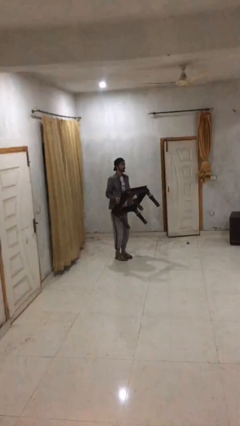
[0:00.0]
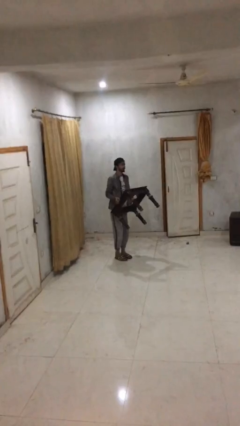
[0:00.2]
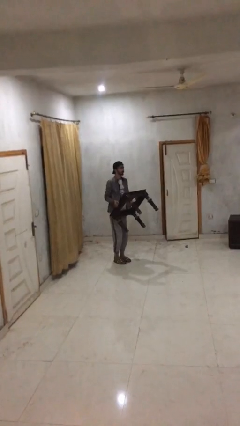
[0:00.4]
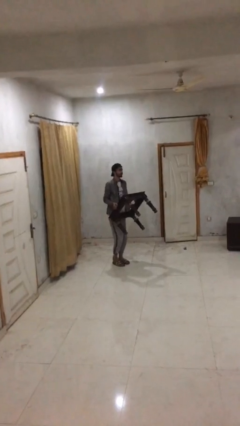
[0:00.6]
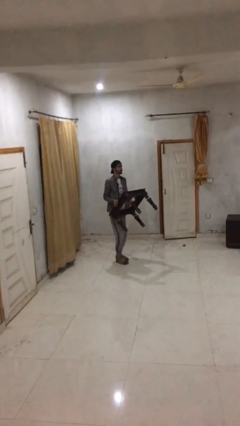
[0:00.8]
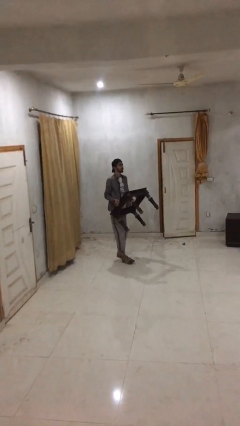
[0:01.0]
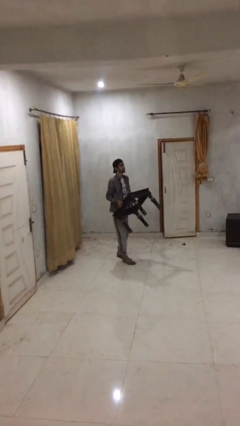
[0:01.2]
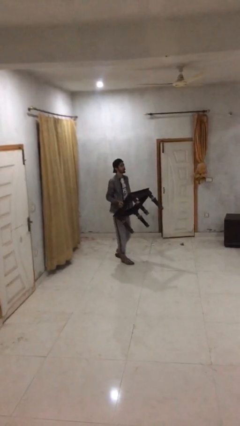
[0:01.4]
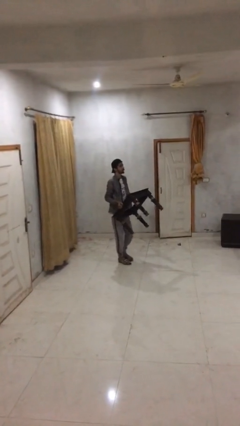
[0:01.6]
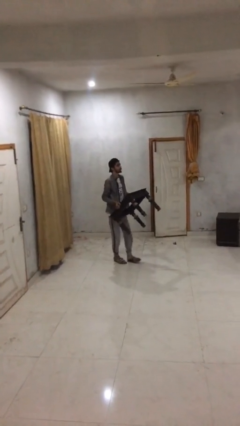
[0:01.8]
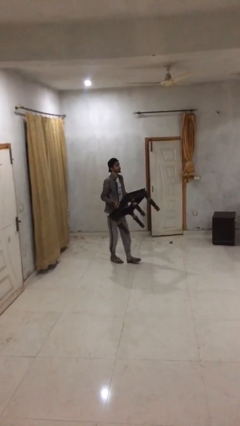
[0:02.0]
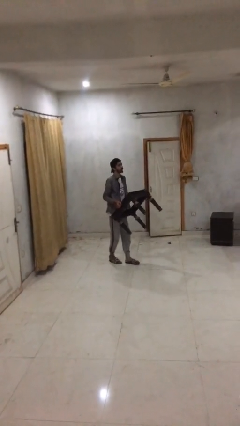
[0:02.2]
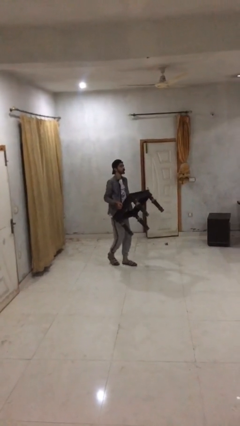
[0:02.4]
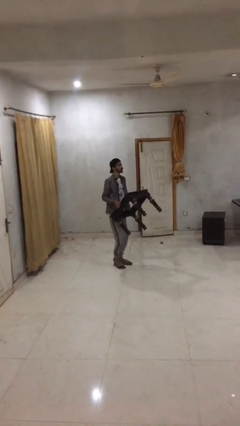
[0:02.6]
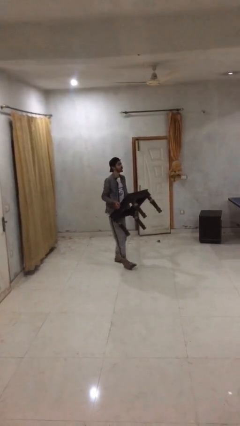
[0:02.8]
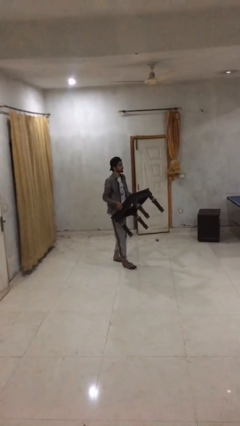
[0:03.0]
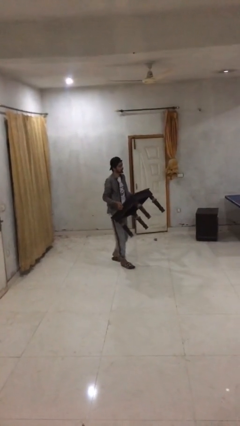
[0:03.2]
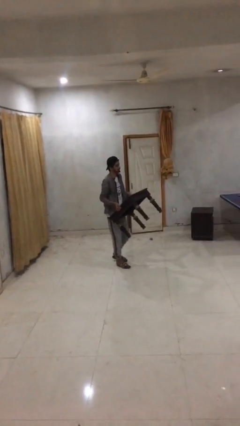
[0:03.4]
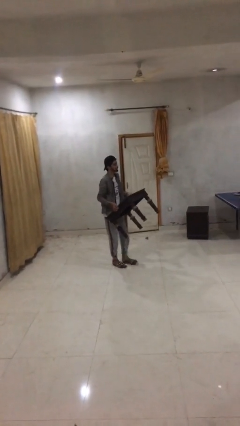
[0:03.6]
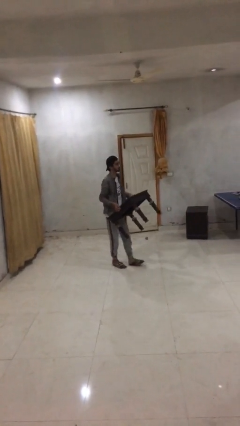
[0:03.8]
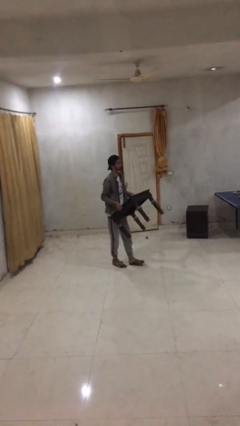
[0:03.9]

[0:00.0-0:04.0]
person carries heavy object

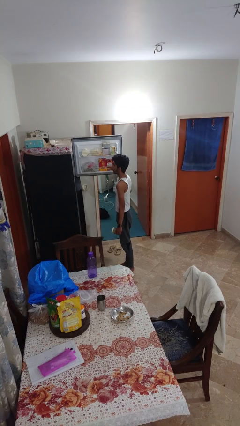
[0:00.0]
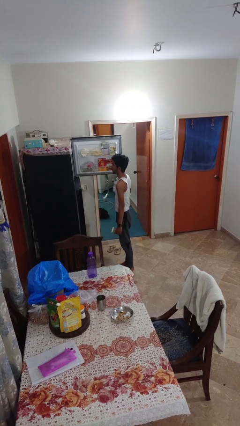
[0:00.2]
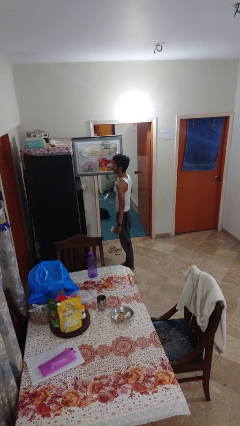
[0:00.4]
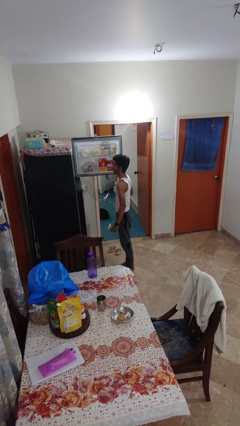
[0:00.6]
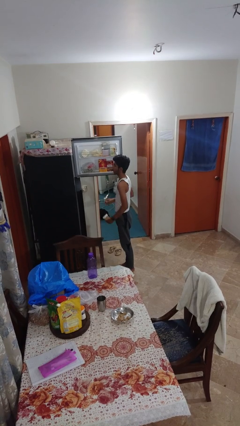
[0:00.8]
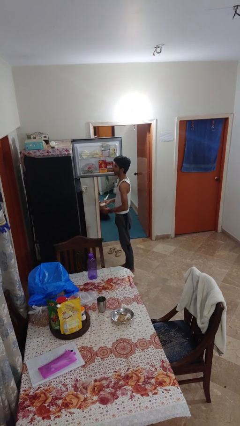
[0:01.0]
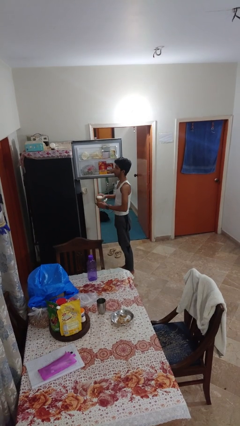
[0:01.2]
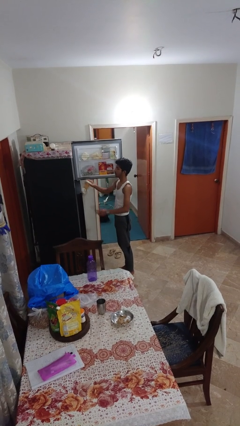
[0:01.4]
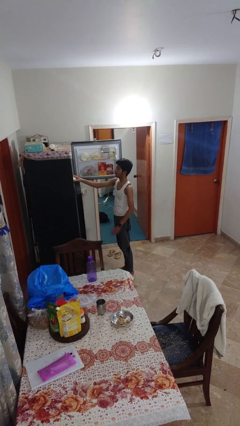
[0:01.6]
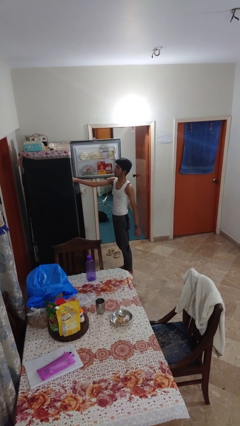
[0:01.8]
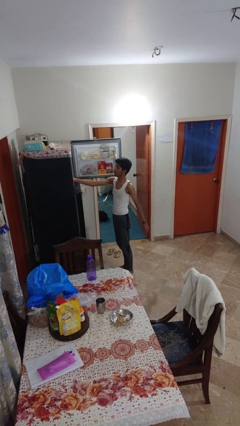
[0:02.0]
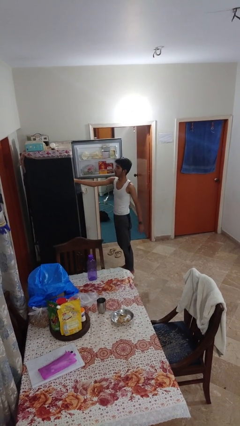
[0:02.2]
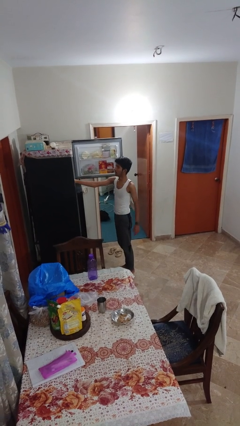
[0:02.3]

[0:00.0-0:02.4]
person puts object into refrigerator

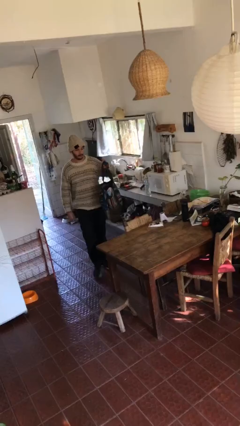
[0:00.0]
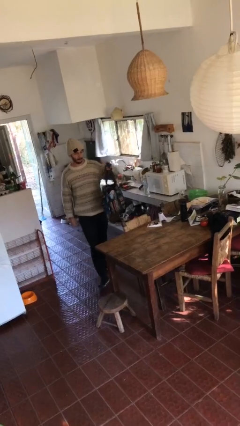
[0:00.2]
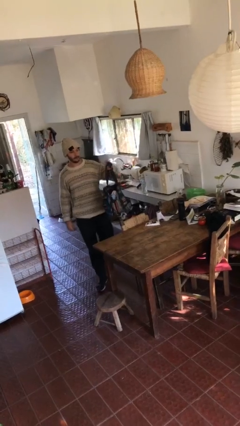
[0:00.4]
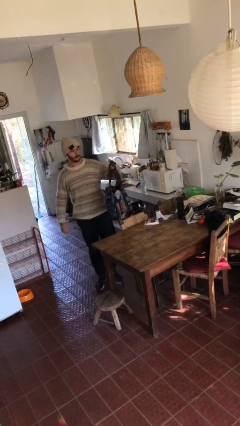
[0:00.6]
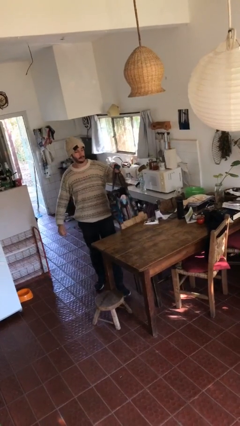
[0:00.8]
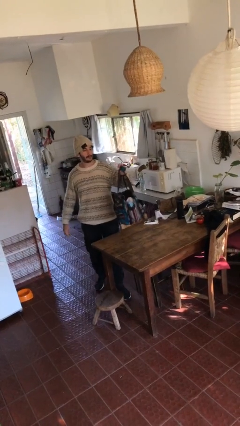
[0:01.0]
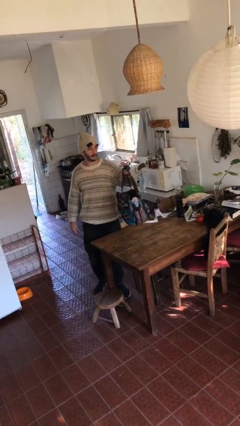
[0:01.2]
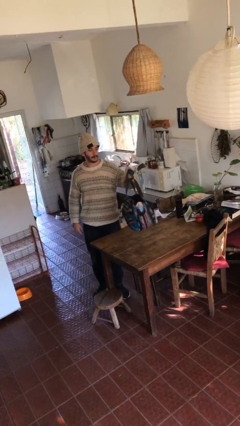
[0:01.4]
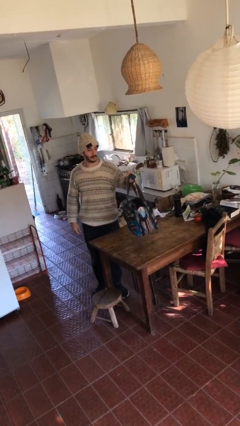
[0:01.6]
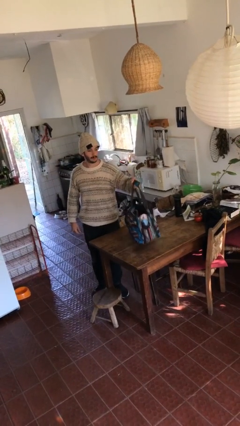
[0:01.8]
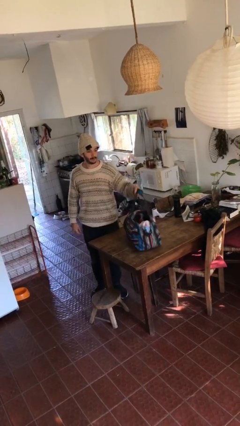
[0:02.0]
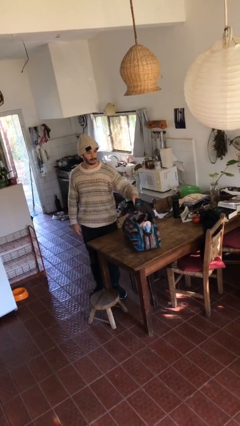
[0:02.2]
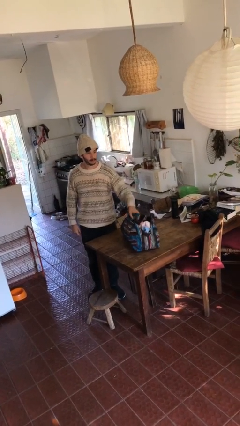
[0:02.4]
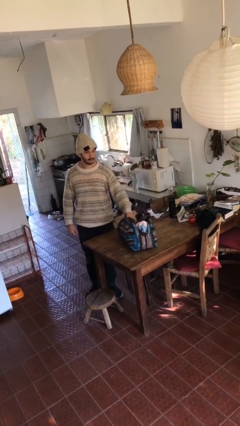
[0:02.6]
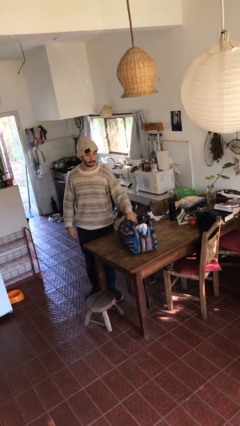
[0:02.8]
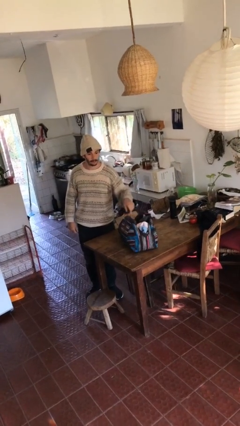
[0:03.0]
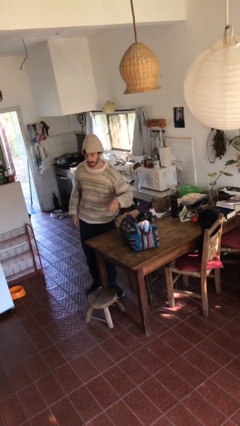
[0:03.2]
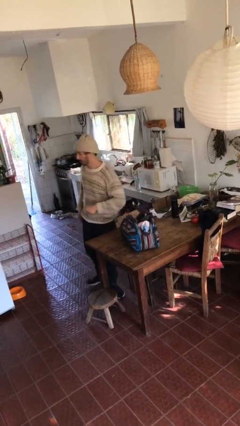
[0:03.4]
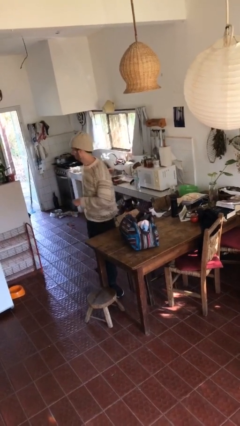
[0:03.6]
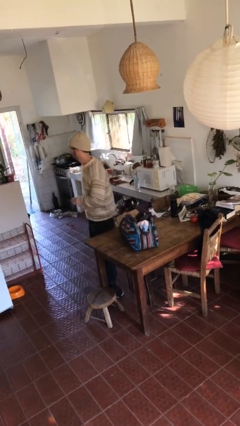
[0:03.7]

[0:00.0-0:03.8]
person puts down object on table

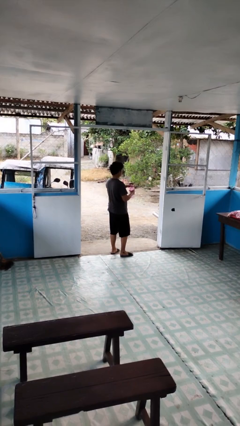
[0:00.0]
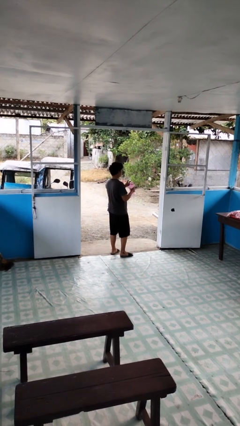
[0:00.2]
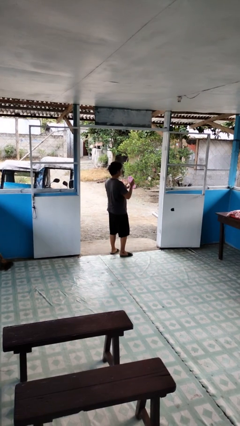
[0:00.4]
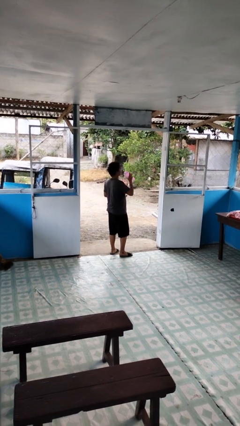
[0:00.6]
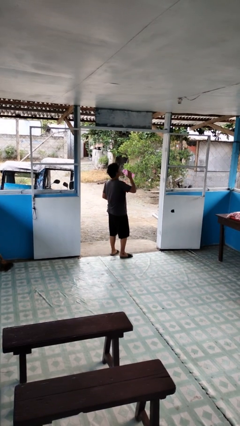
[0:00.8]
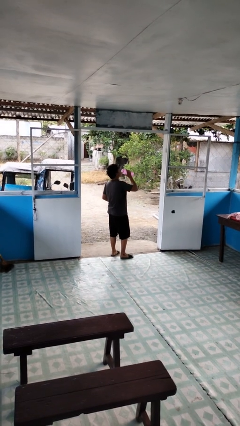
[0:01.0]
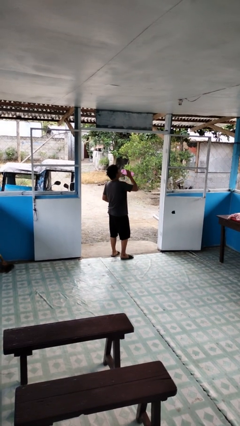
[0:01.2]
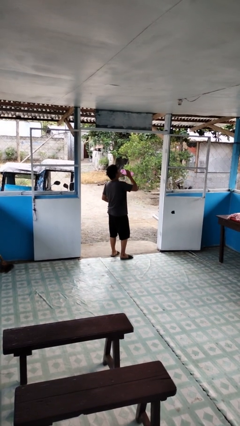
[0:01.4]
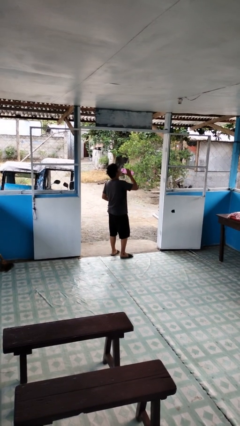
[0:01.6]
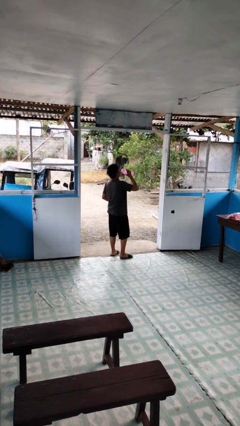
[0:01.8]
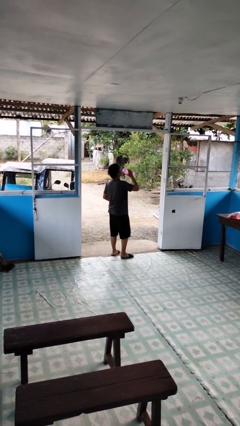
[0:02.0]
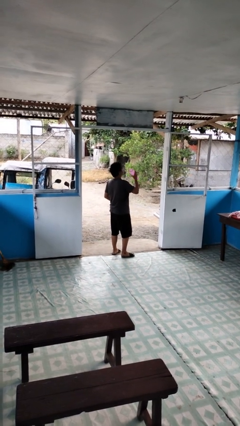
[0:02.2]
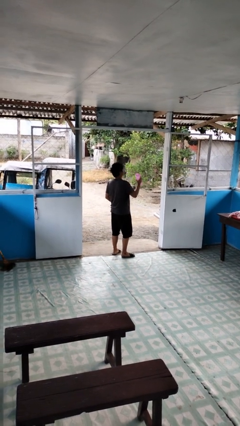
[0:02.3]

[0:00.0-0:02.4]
person drinks from bottle

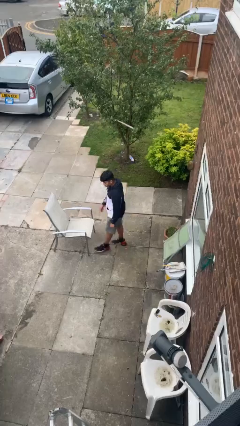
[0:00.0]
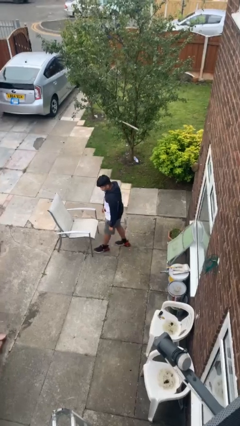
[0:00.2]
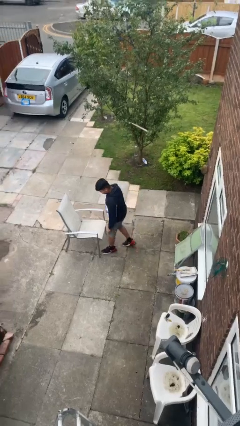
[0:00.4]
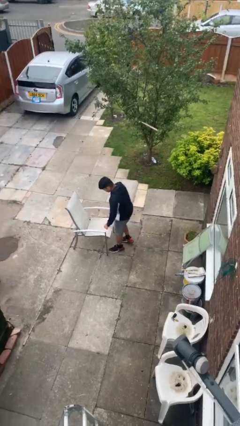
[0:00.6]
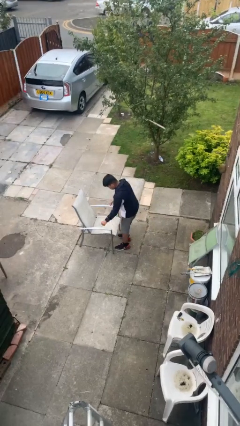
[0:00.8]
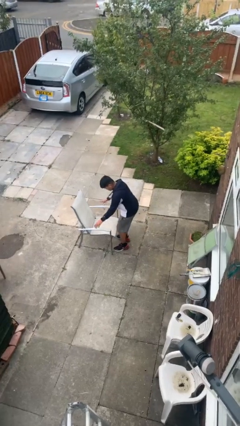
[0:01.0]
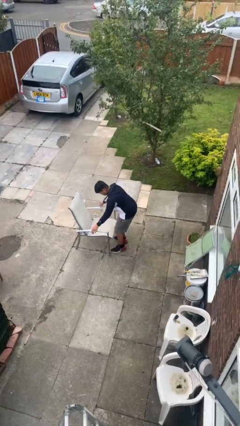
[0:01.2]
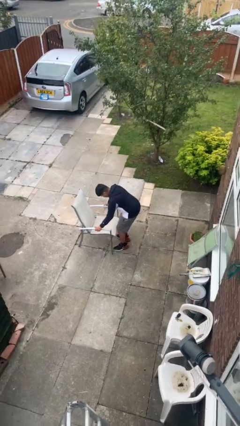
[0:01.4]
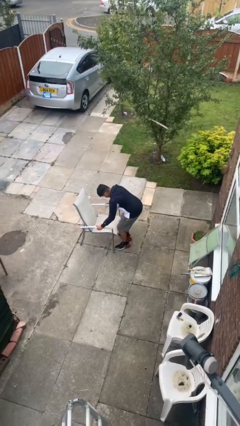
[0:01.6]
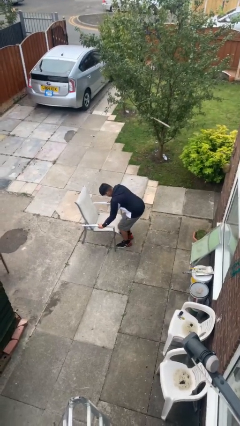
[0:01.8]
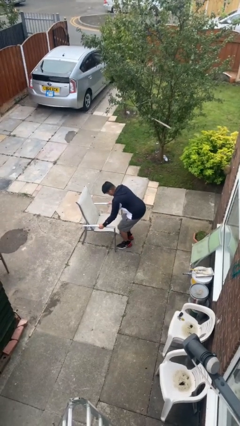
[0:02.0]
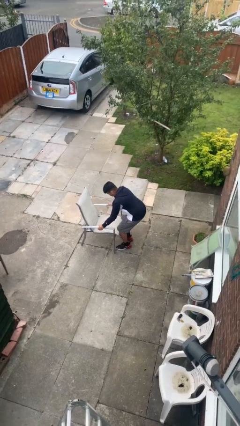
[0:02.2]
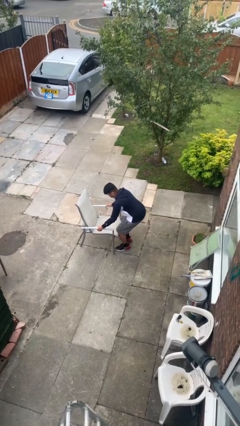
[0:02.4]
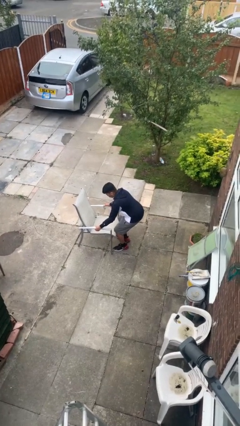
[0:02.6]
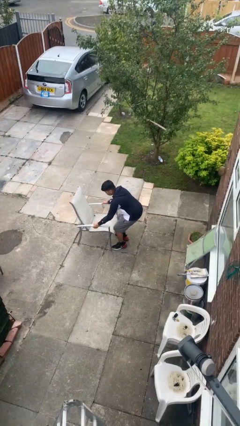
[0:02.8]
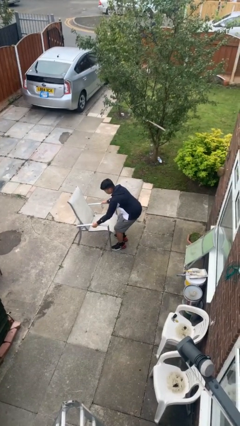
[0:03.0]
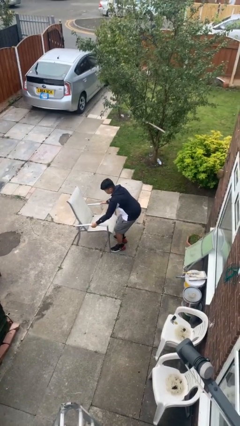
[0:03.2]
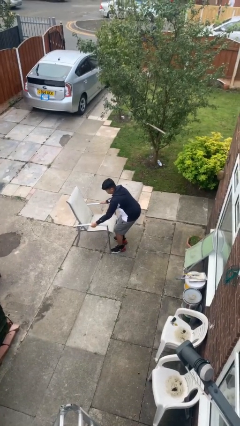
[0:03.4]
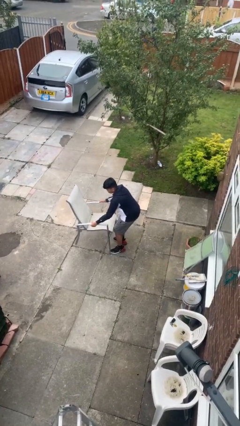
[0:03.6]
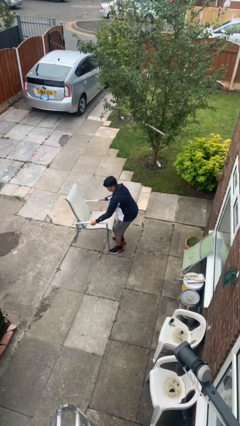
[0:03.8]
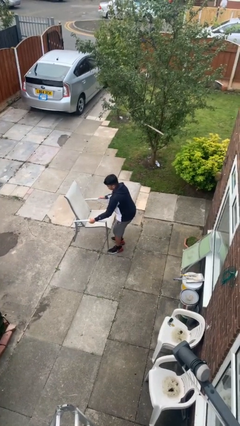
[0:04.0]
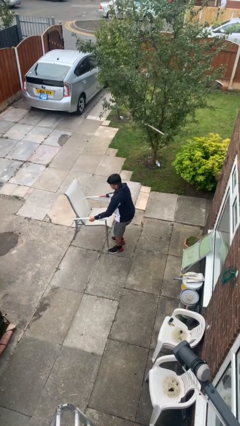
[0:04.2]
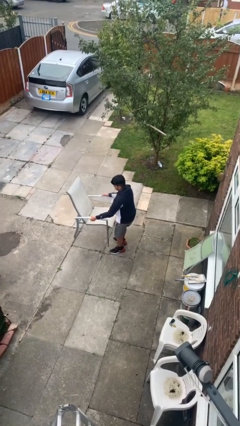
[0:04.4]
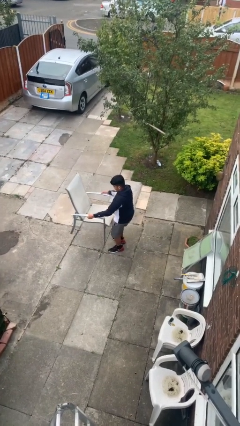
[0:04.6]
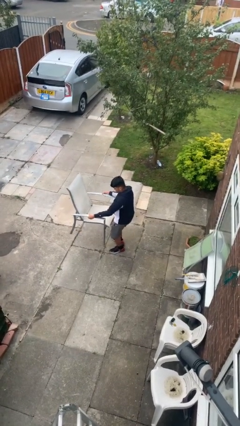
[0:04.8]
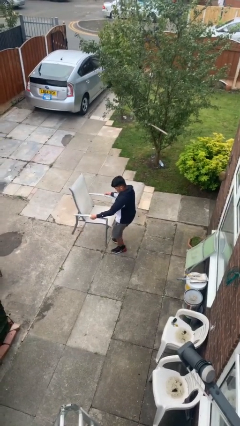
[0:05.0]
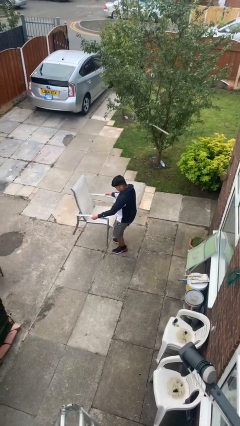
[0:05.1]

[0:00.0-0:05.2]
person picks up object from floor
